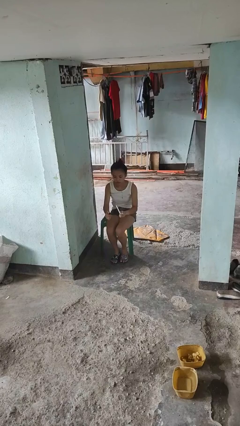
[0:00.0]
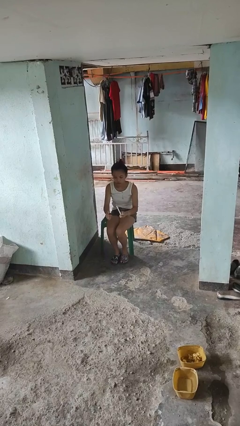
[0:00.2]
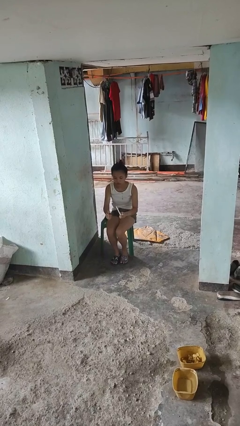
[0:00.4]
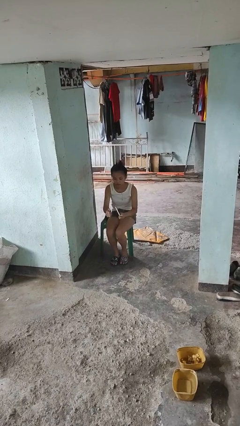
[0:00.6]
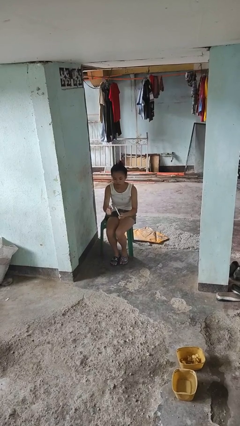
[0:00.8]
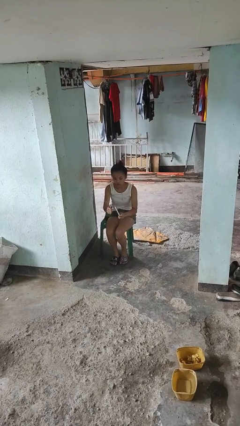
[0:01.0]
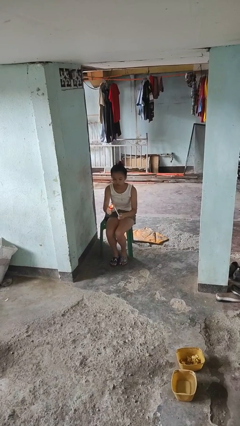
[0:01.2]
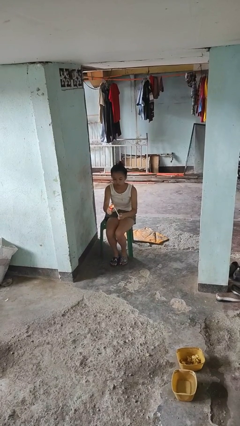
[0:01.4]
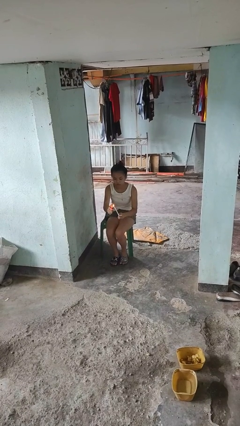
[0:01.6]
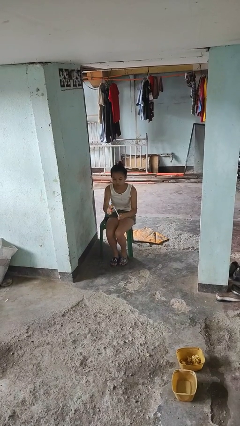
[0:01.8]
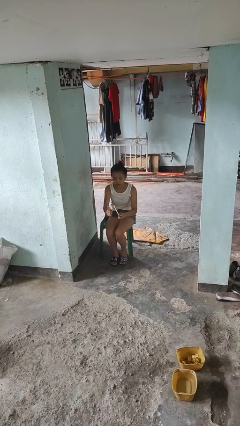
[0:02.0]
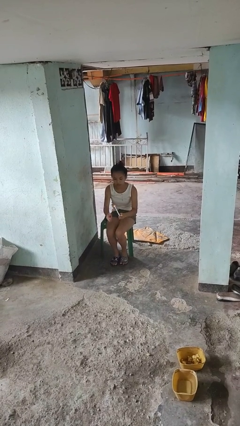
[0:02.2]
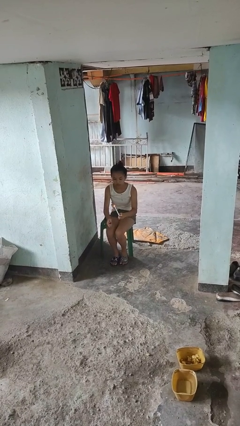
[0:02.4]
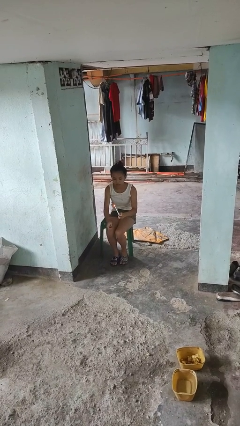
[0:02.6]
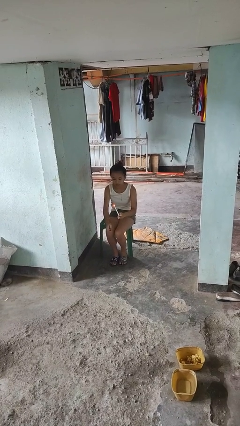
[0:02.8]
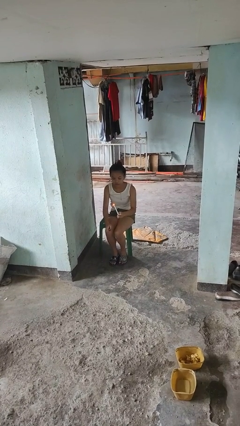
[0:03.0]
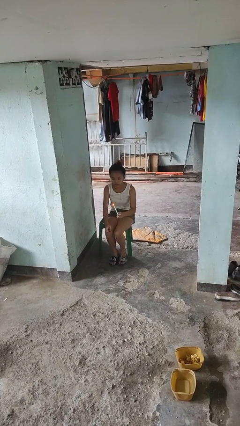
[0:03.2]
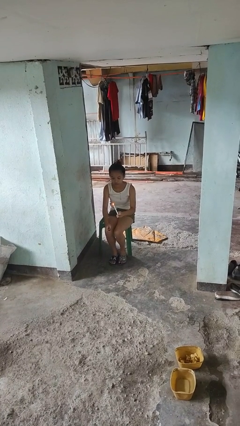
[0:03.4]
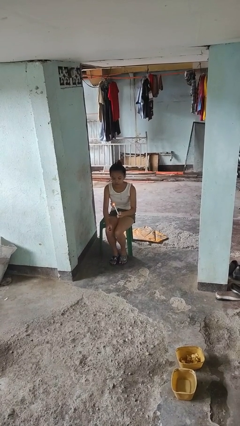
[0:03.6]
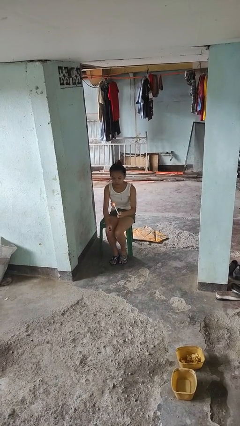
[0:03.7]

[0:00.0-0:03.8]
person lights candle

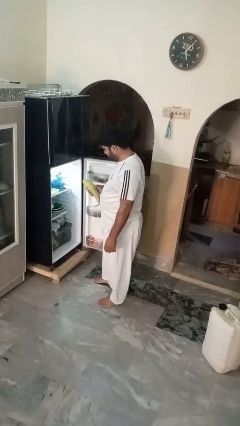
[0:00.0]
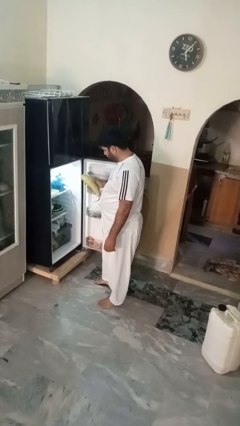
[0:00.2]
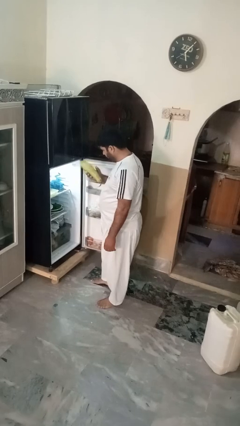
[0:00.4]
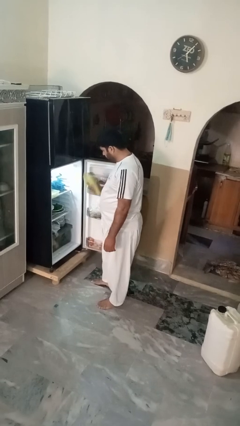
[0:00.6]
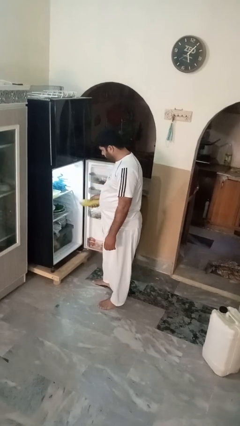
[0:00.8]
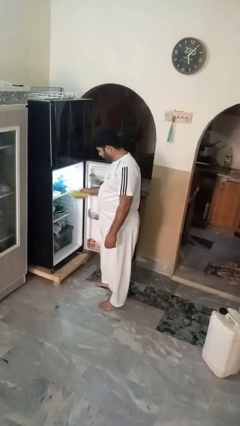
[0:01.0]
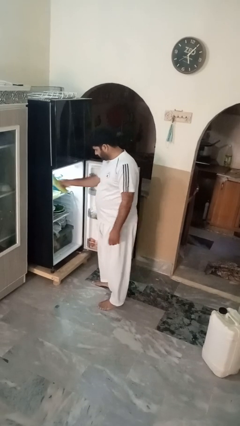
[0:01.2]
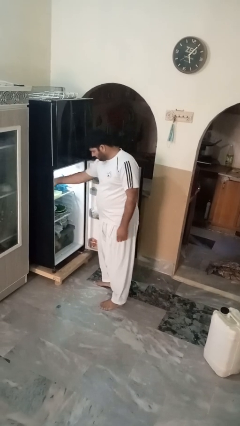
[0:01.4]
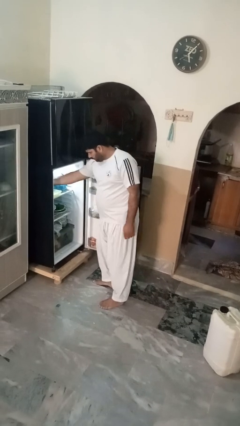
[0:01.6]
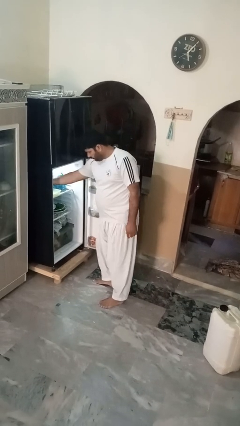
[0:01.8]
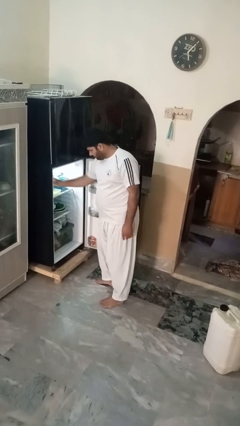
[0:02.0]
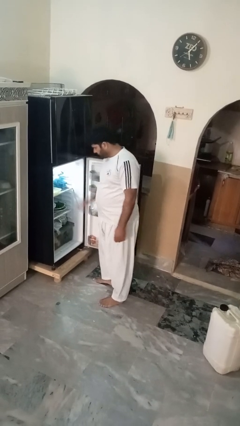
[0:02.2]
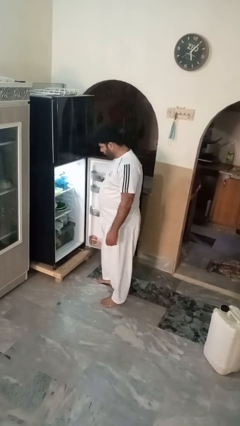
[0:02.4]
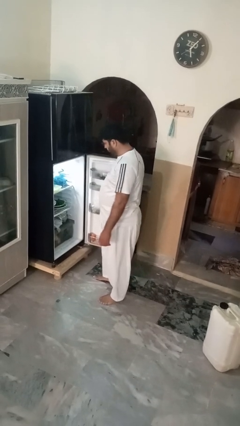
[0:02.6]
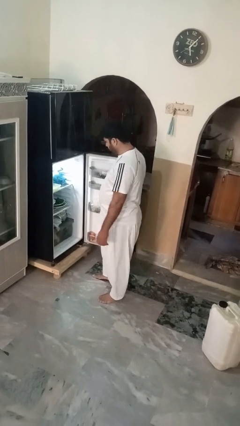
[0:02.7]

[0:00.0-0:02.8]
person puts object into refrigerator

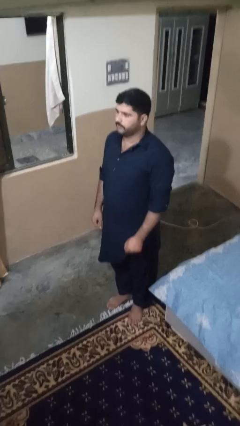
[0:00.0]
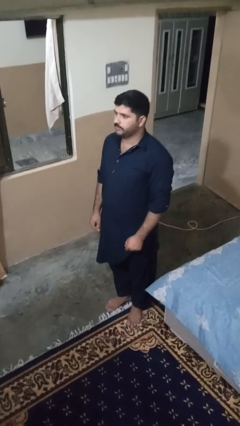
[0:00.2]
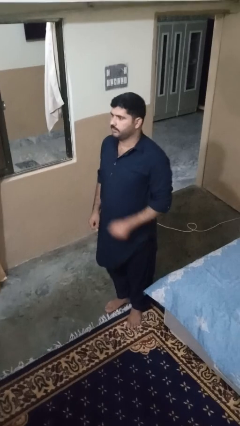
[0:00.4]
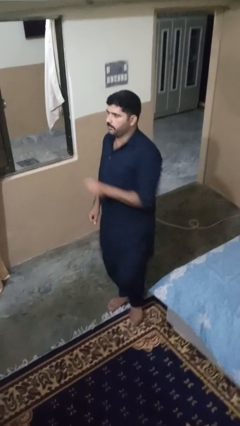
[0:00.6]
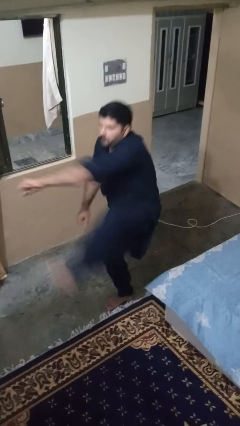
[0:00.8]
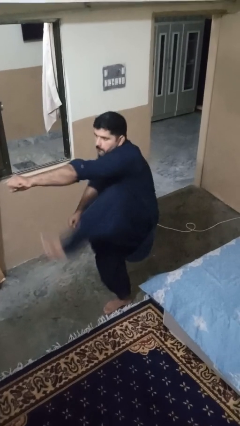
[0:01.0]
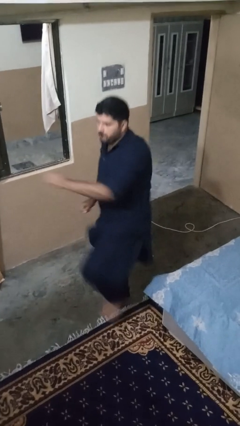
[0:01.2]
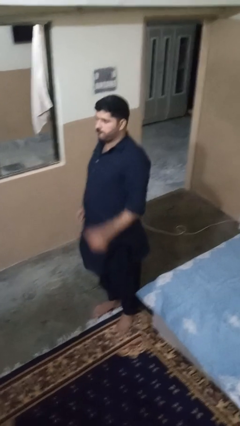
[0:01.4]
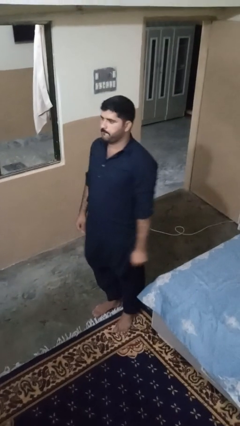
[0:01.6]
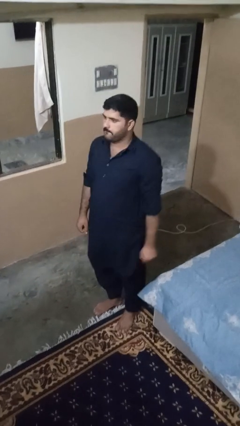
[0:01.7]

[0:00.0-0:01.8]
person karate kicks

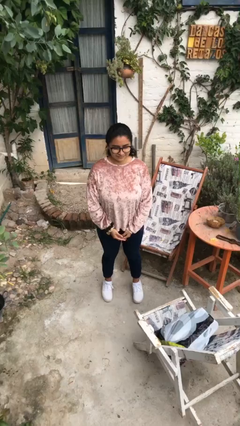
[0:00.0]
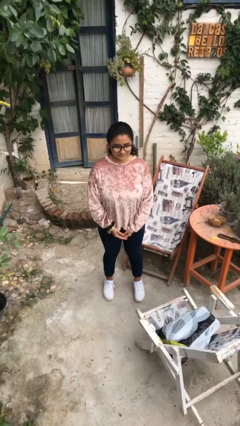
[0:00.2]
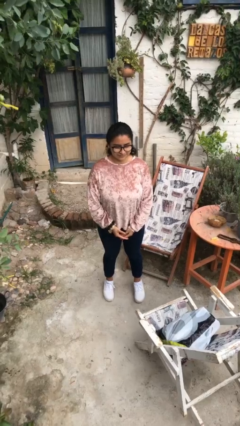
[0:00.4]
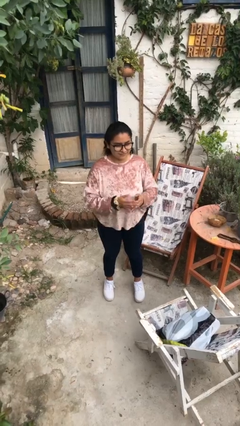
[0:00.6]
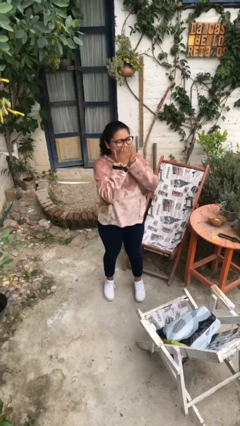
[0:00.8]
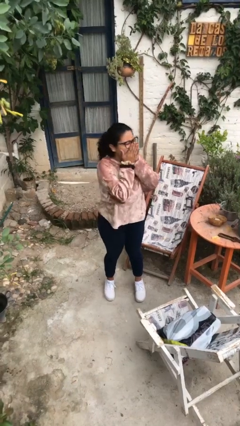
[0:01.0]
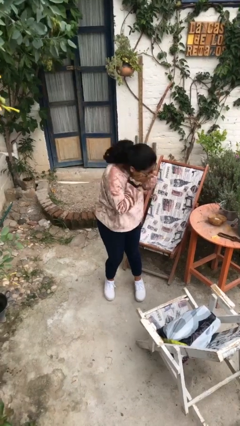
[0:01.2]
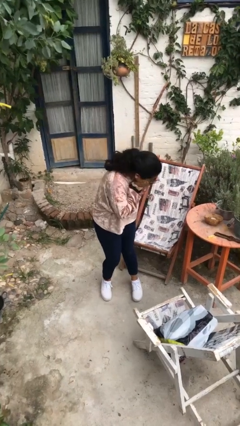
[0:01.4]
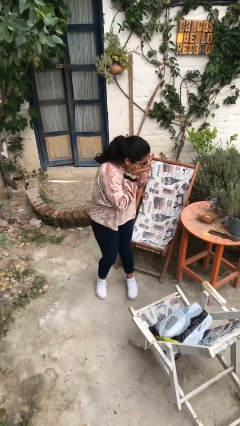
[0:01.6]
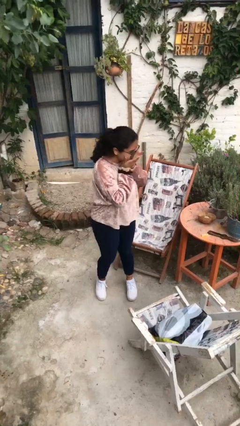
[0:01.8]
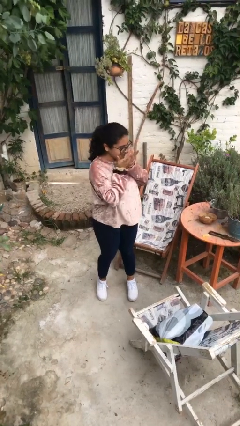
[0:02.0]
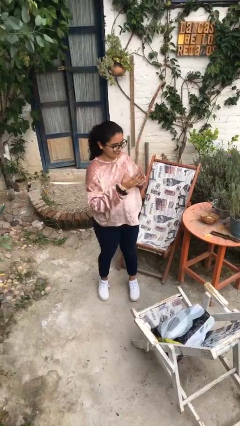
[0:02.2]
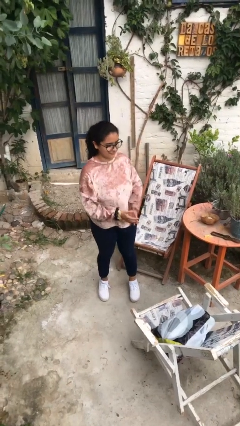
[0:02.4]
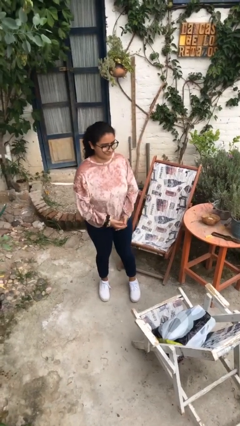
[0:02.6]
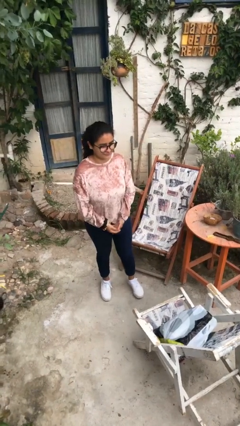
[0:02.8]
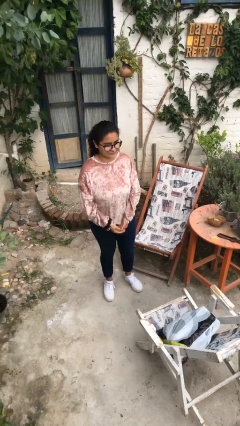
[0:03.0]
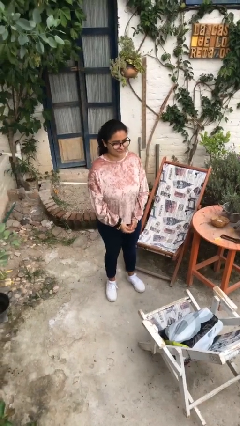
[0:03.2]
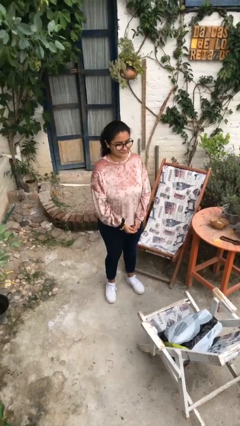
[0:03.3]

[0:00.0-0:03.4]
person sneezes into hand

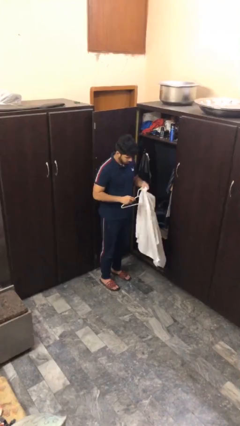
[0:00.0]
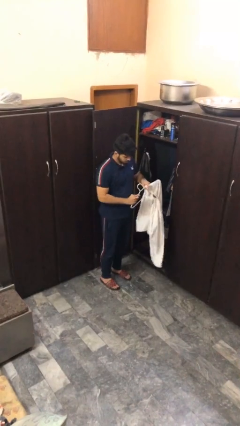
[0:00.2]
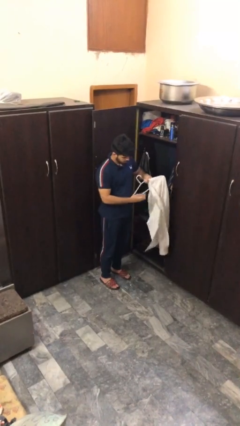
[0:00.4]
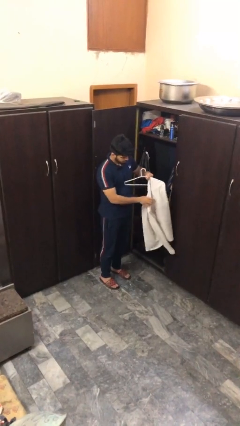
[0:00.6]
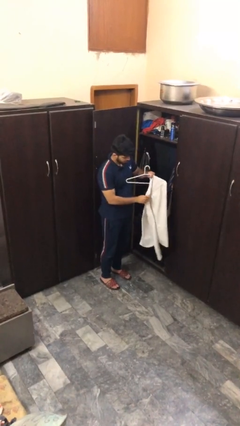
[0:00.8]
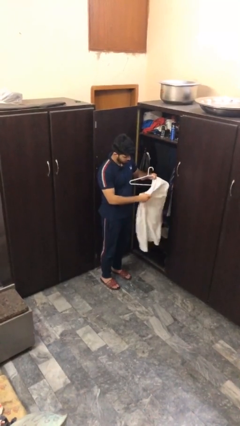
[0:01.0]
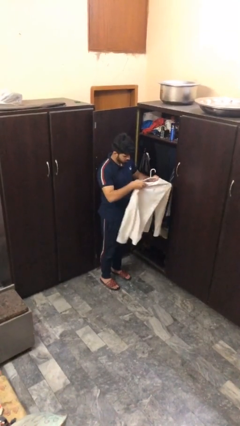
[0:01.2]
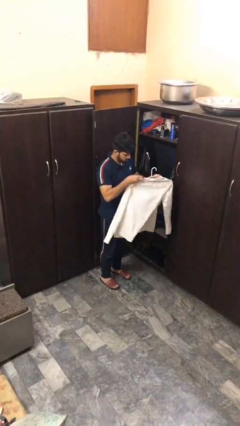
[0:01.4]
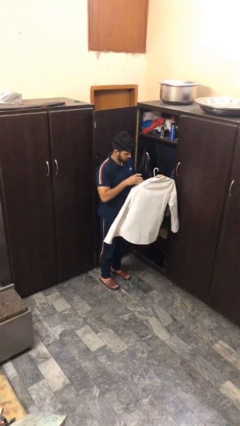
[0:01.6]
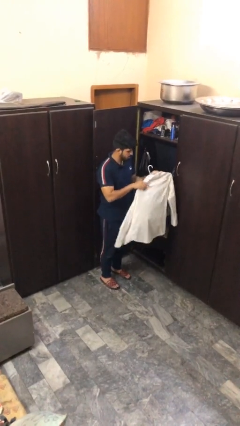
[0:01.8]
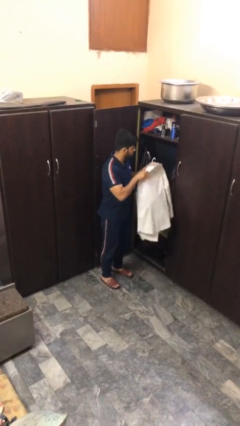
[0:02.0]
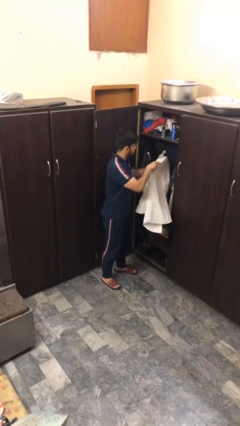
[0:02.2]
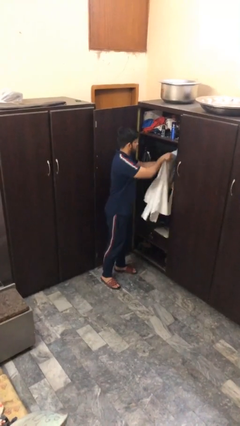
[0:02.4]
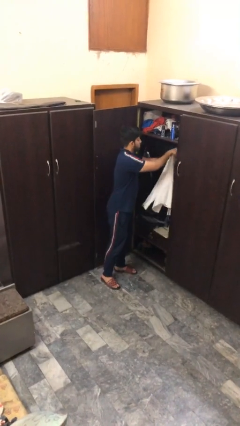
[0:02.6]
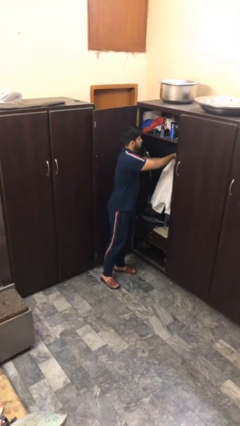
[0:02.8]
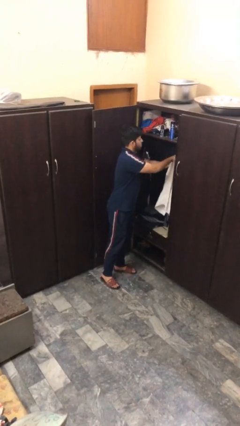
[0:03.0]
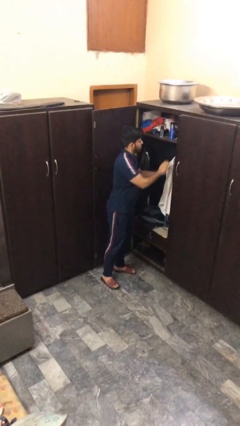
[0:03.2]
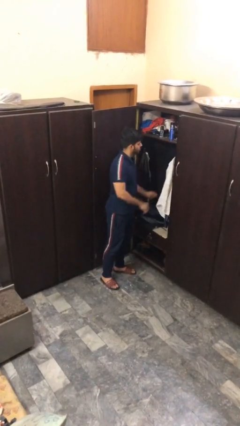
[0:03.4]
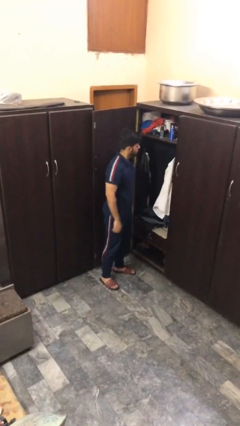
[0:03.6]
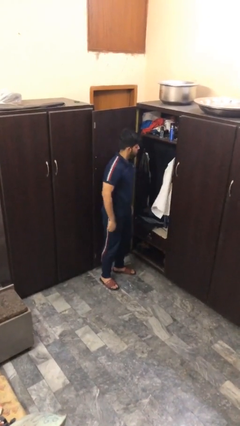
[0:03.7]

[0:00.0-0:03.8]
person puts clothes into closet

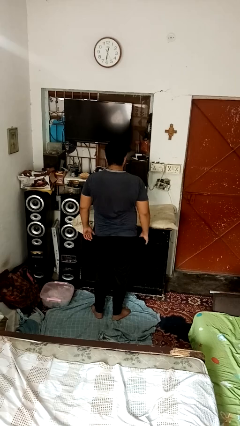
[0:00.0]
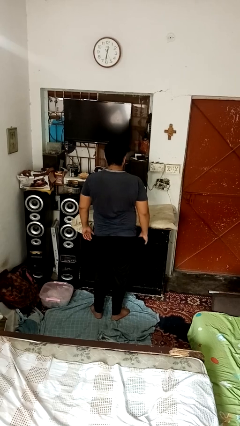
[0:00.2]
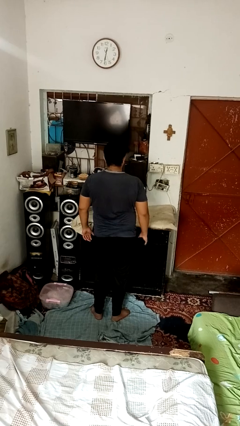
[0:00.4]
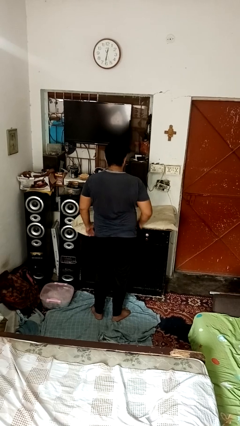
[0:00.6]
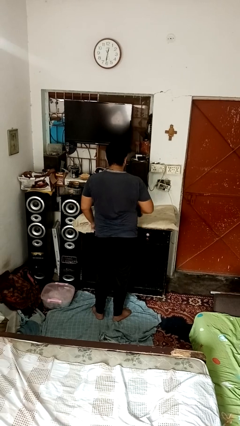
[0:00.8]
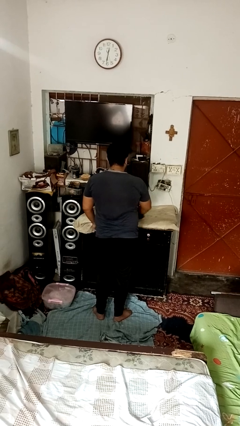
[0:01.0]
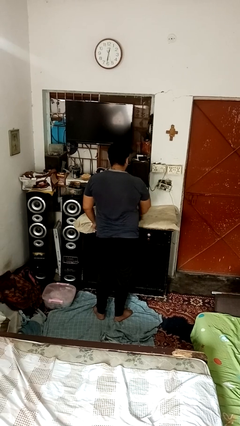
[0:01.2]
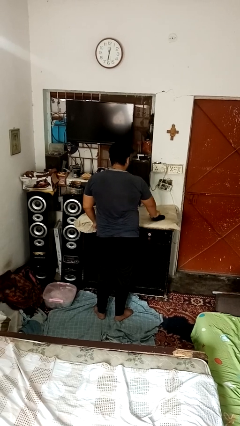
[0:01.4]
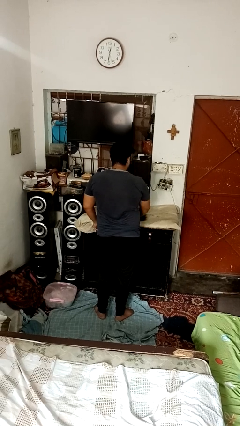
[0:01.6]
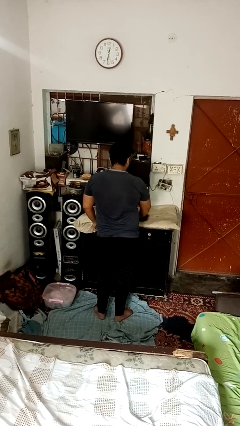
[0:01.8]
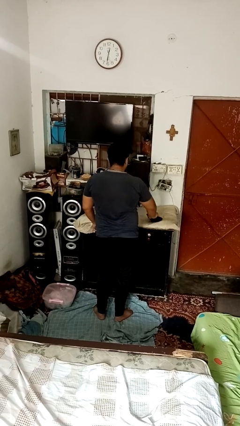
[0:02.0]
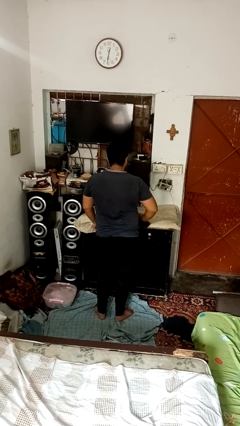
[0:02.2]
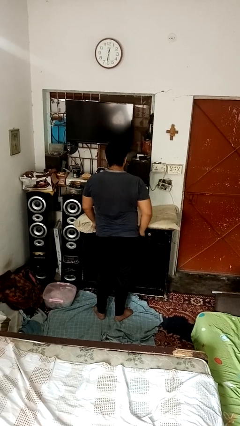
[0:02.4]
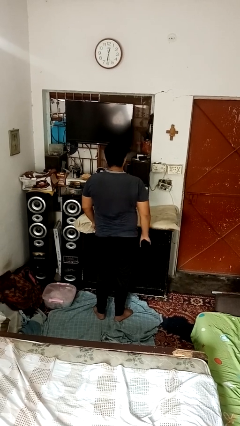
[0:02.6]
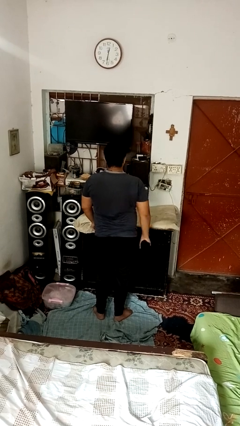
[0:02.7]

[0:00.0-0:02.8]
person cleans table with rag
